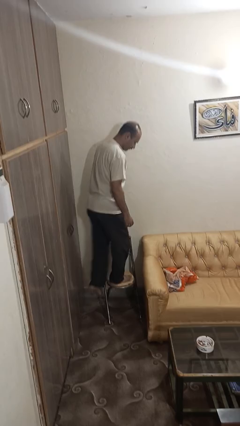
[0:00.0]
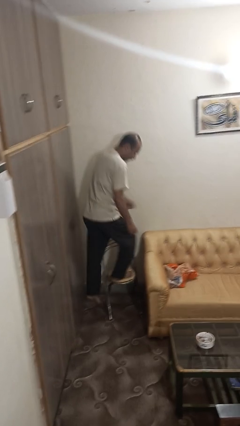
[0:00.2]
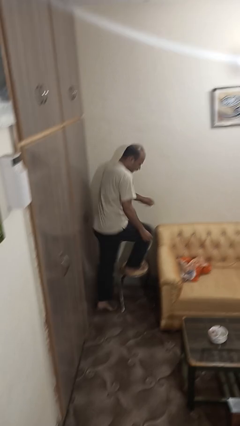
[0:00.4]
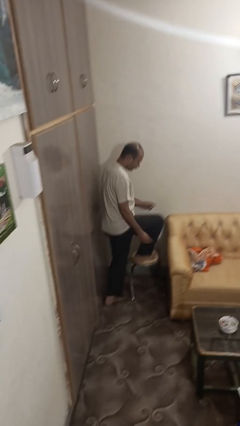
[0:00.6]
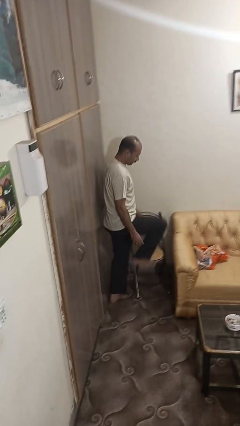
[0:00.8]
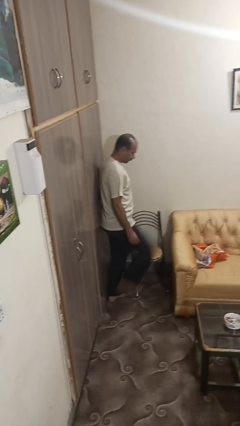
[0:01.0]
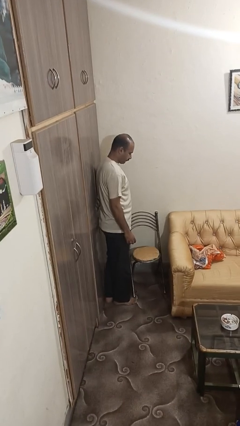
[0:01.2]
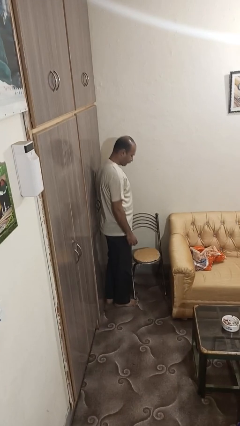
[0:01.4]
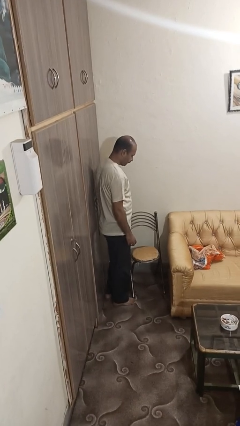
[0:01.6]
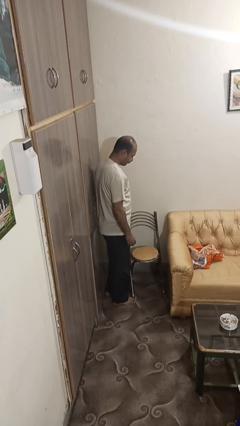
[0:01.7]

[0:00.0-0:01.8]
person climbs off chair

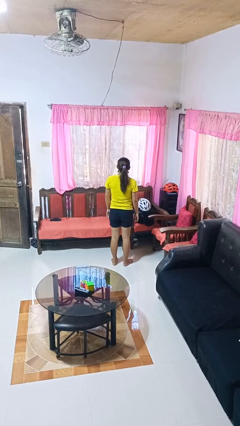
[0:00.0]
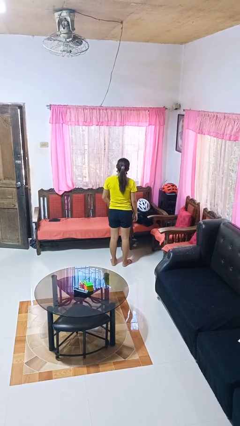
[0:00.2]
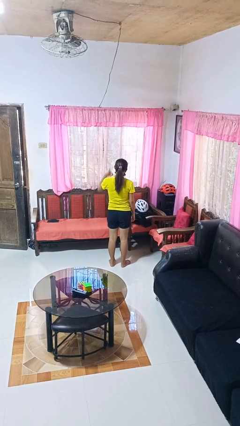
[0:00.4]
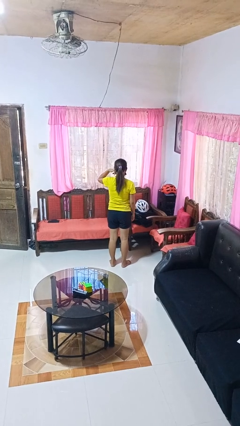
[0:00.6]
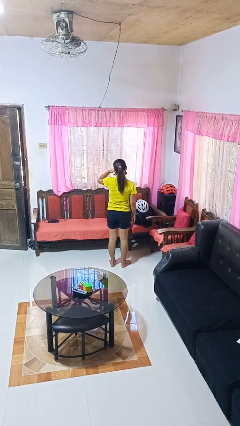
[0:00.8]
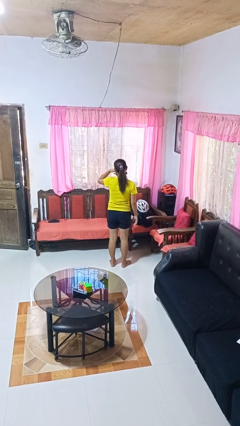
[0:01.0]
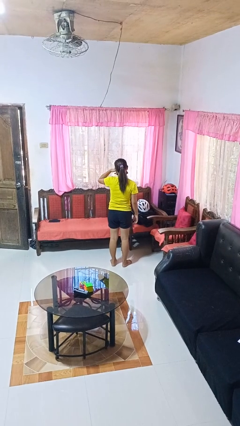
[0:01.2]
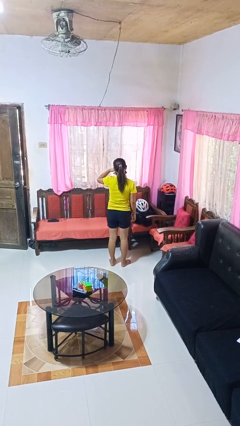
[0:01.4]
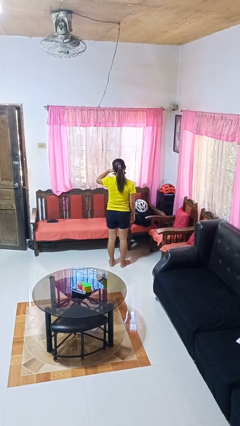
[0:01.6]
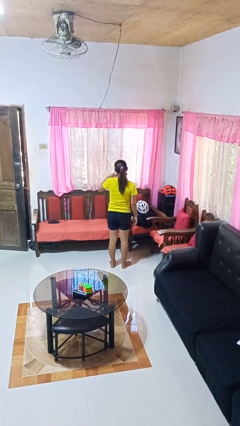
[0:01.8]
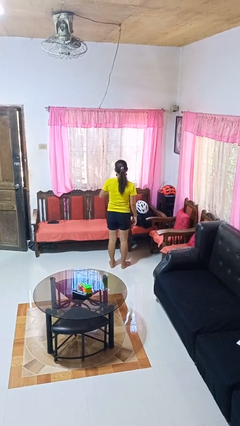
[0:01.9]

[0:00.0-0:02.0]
person gestures call me

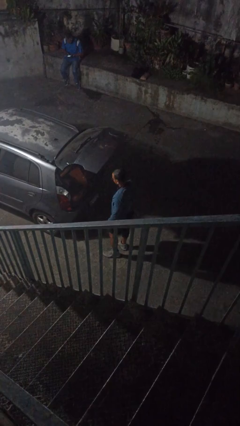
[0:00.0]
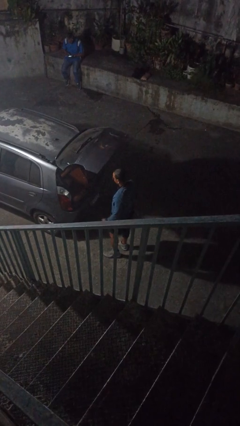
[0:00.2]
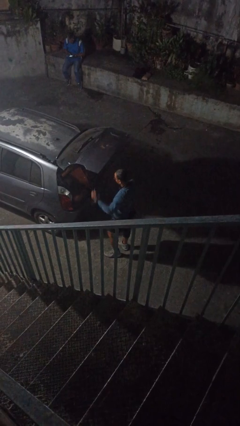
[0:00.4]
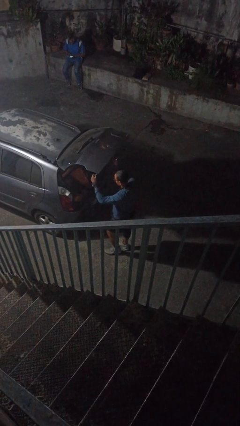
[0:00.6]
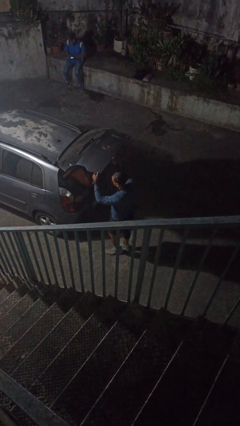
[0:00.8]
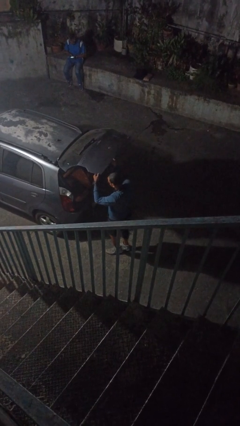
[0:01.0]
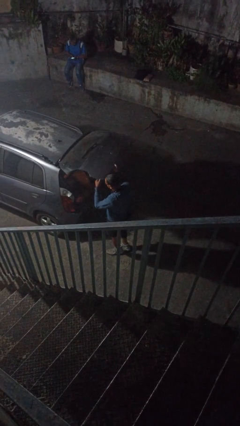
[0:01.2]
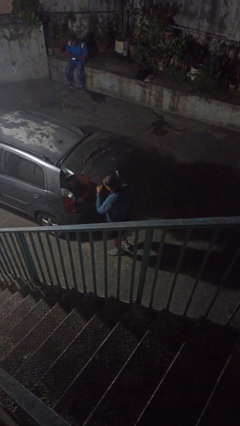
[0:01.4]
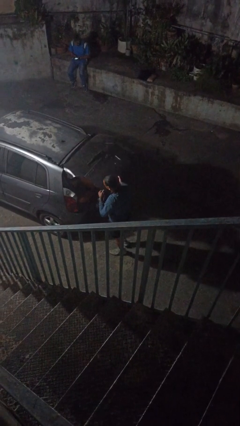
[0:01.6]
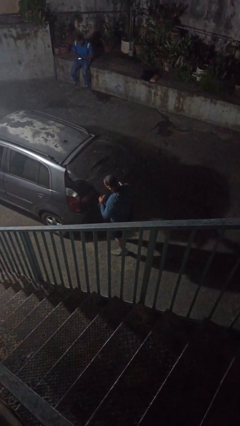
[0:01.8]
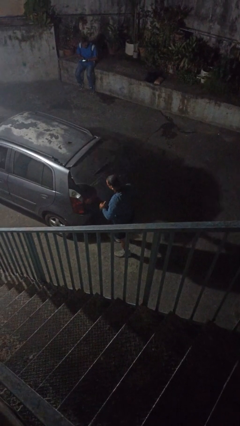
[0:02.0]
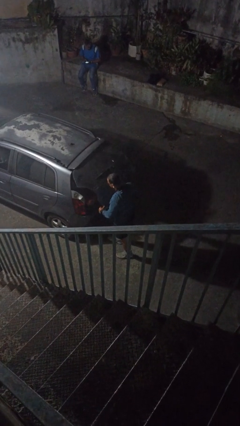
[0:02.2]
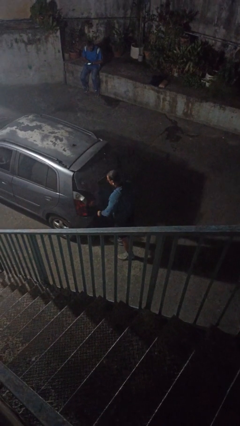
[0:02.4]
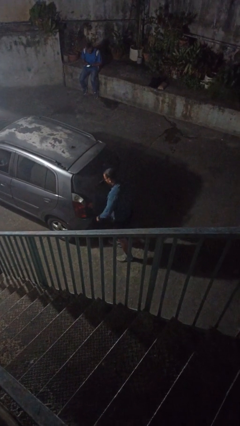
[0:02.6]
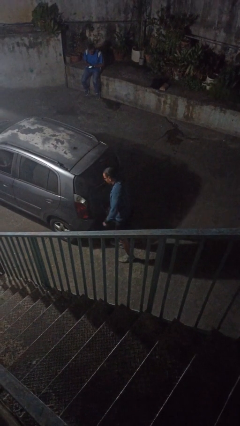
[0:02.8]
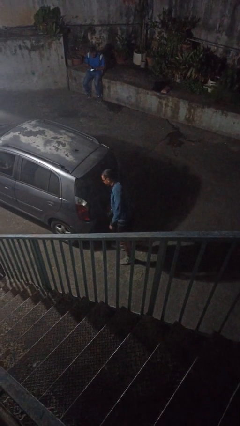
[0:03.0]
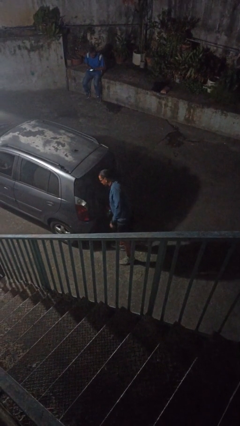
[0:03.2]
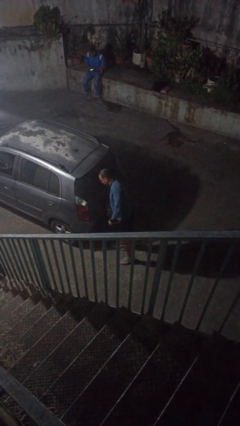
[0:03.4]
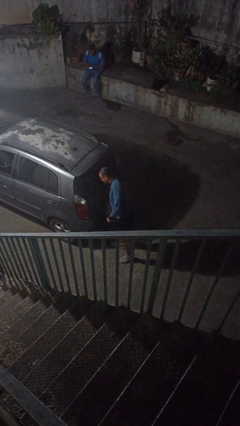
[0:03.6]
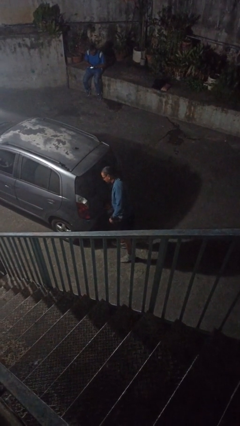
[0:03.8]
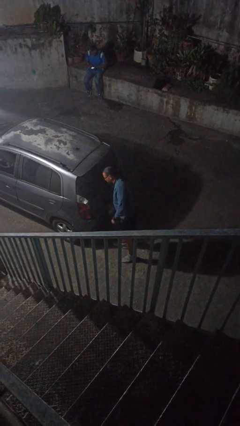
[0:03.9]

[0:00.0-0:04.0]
person closes car trunk

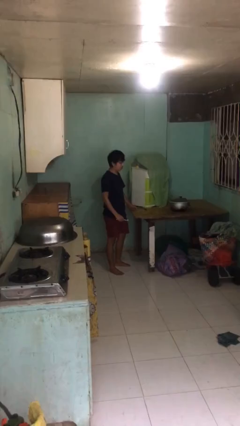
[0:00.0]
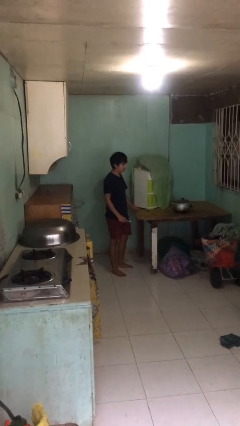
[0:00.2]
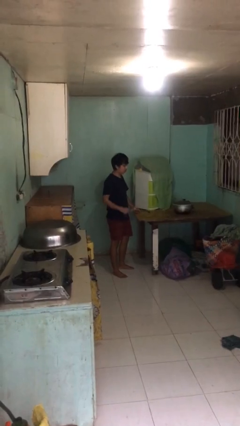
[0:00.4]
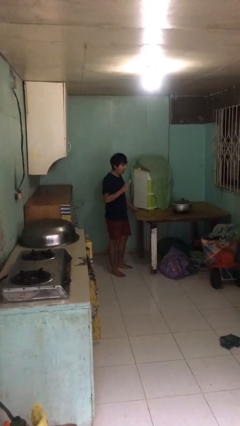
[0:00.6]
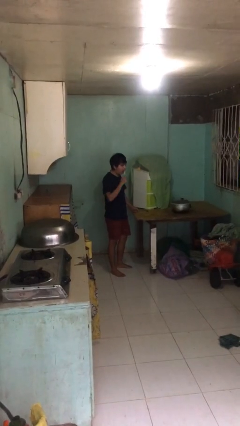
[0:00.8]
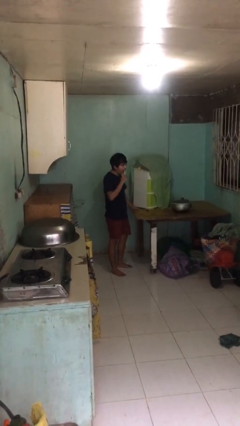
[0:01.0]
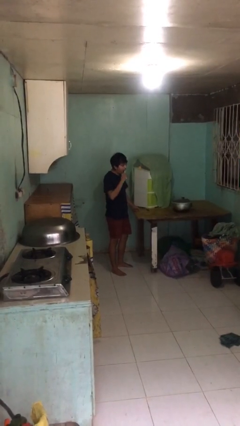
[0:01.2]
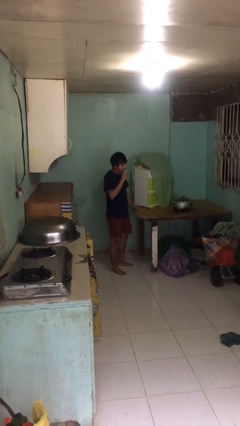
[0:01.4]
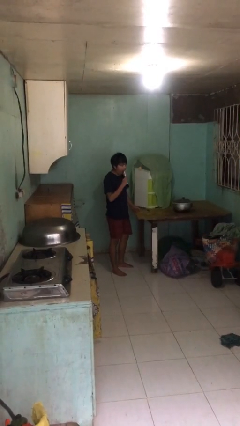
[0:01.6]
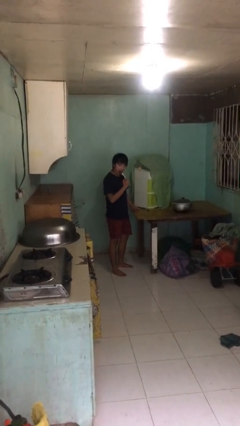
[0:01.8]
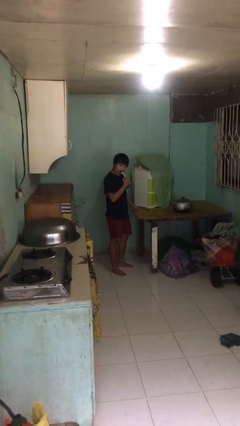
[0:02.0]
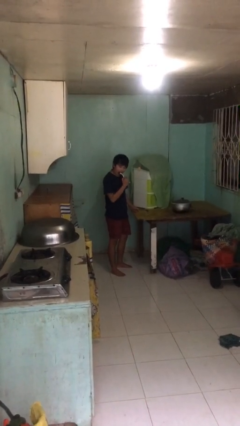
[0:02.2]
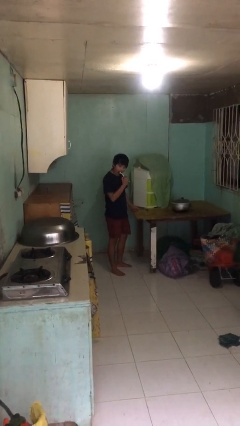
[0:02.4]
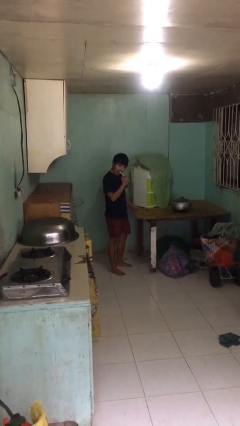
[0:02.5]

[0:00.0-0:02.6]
person brushes teeth

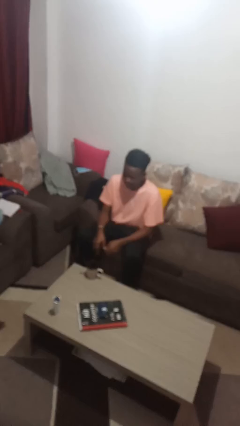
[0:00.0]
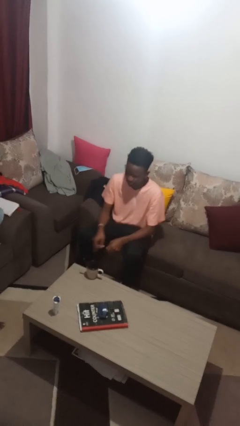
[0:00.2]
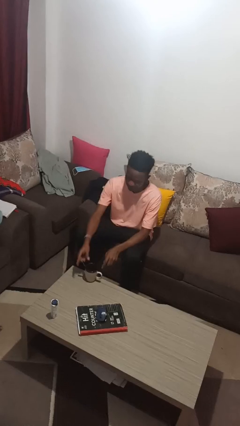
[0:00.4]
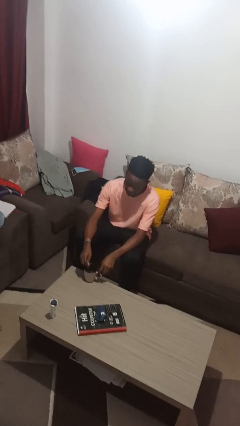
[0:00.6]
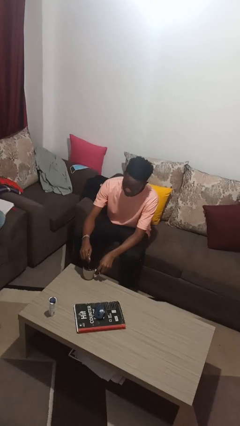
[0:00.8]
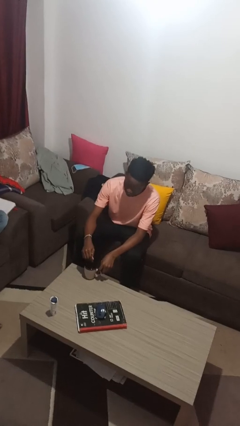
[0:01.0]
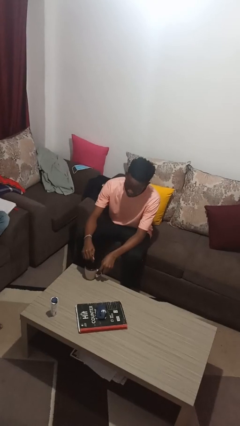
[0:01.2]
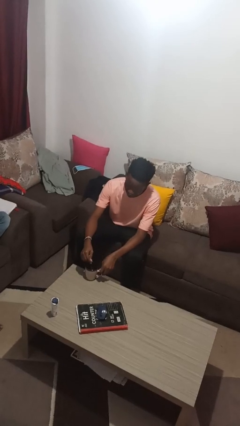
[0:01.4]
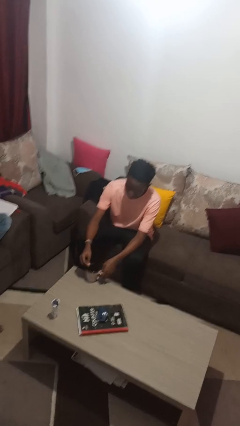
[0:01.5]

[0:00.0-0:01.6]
person stirs mug

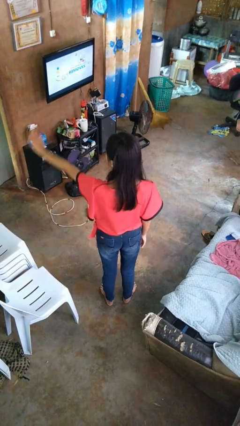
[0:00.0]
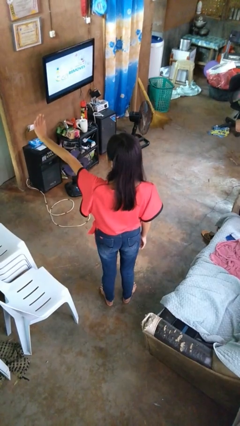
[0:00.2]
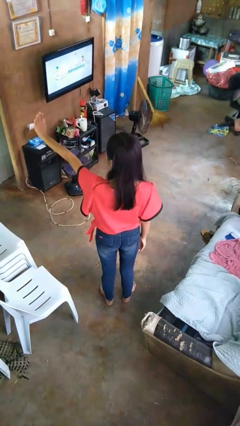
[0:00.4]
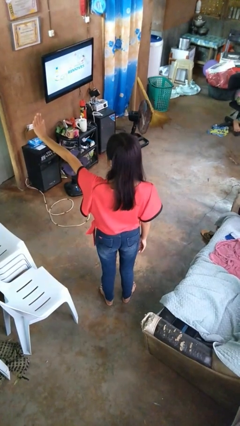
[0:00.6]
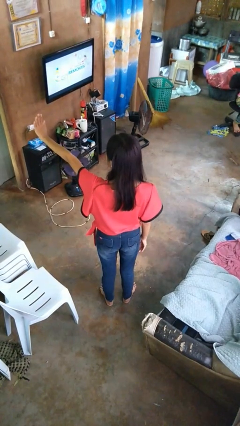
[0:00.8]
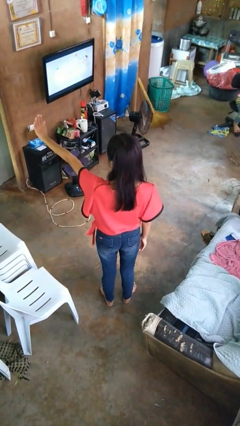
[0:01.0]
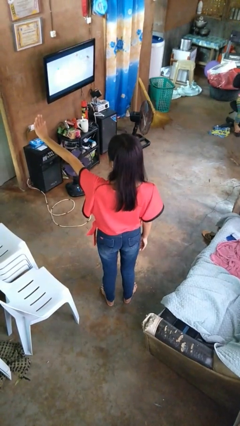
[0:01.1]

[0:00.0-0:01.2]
person gestures stop

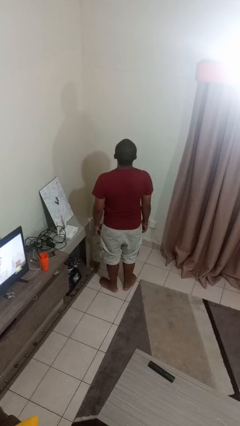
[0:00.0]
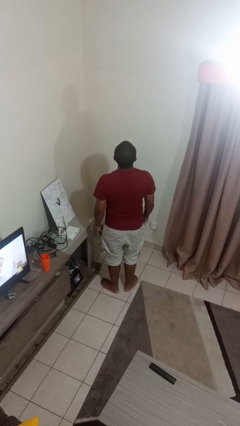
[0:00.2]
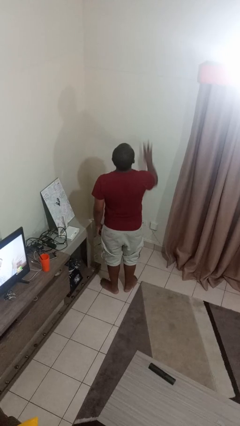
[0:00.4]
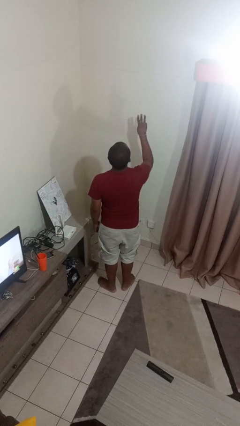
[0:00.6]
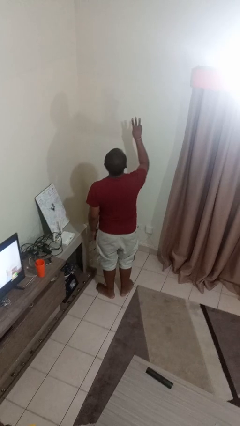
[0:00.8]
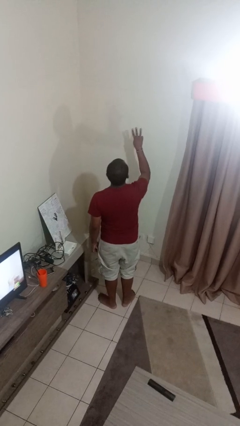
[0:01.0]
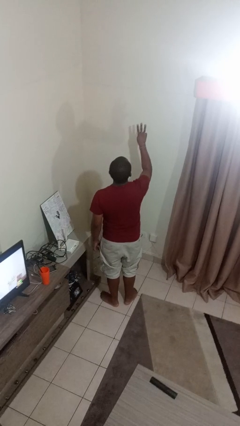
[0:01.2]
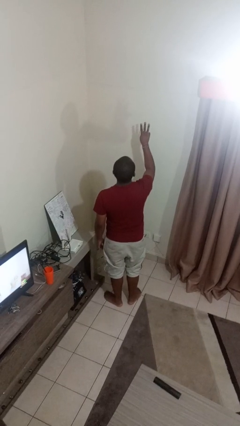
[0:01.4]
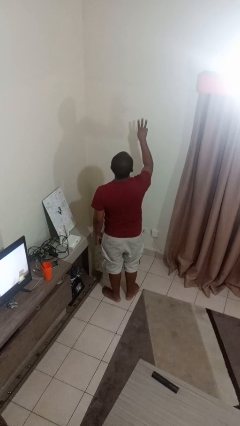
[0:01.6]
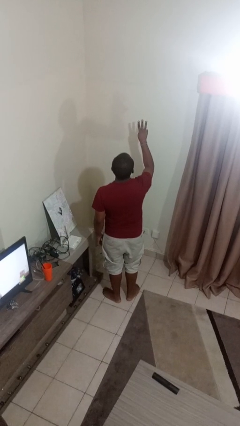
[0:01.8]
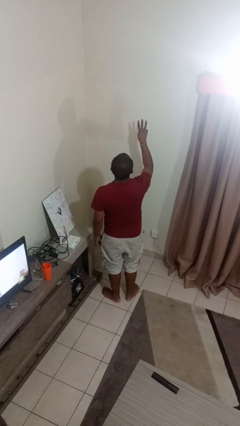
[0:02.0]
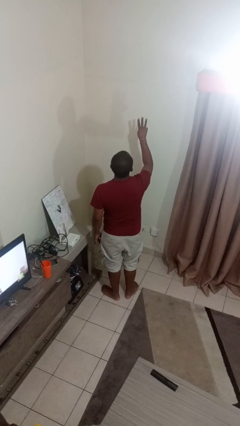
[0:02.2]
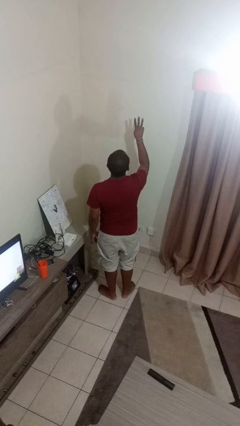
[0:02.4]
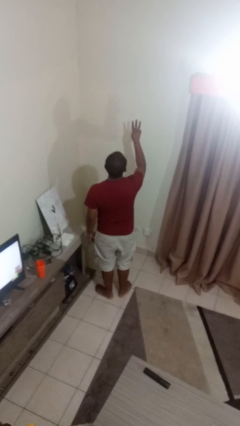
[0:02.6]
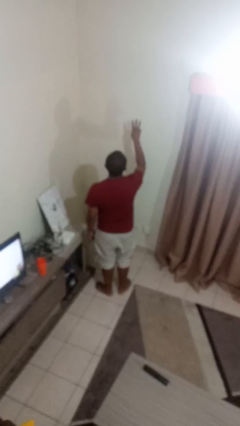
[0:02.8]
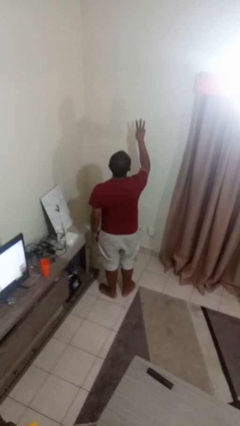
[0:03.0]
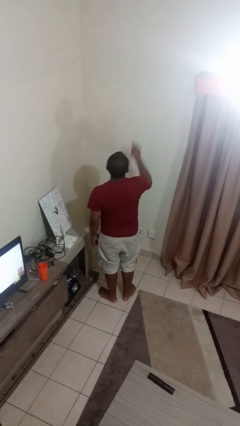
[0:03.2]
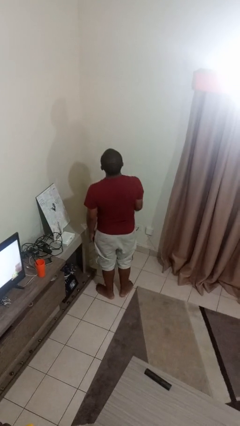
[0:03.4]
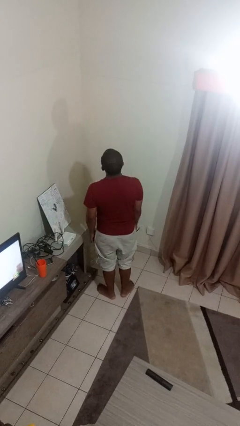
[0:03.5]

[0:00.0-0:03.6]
person gestures number three

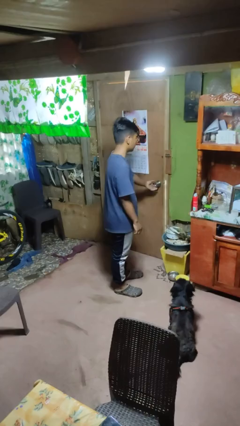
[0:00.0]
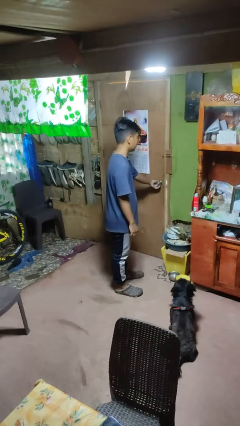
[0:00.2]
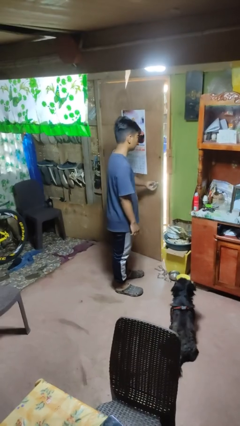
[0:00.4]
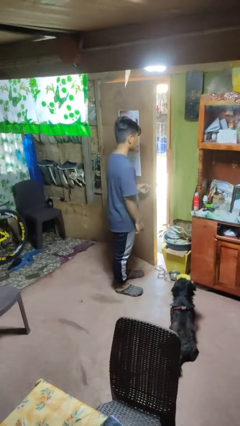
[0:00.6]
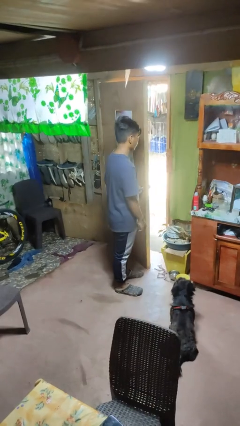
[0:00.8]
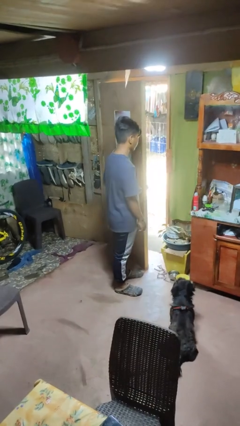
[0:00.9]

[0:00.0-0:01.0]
person opens facility door
